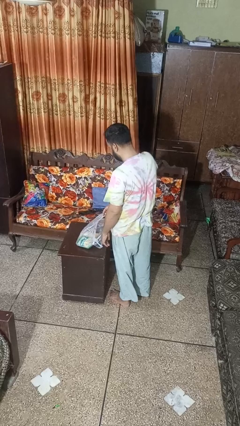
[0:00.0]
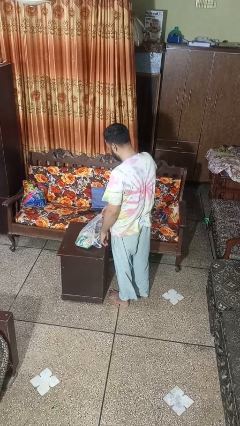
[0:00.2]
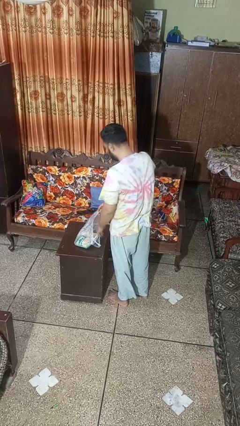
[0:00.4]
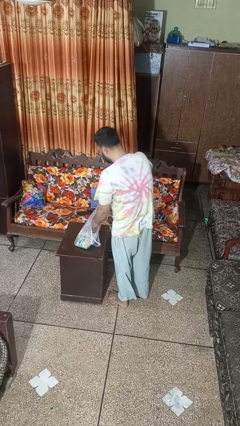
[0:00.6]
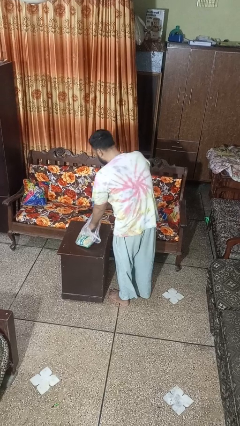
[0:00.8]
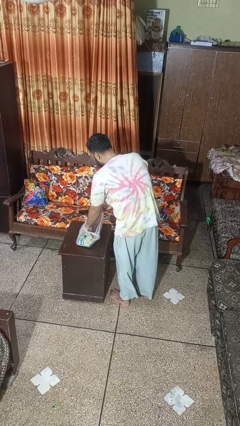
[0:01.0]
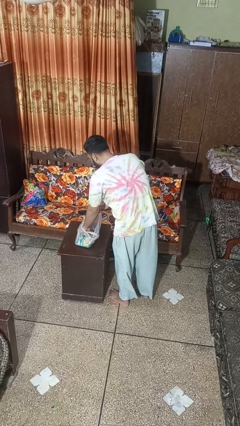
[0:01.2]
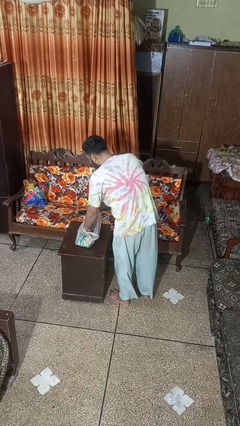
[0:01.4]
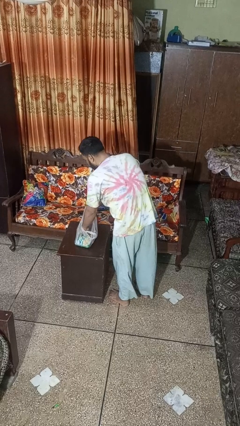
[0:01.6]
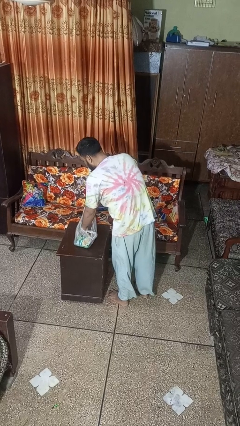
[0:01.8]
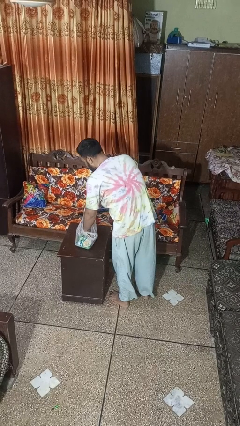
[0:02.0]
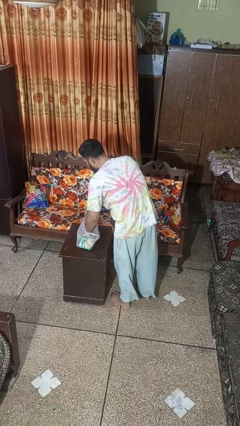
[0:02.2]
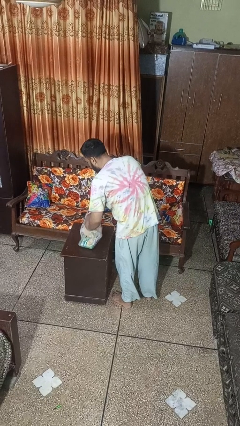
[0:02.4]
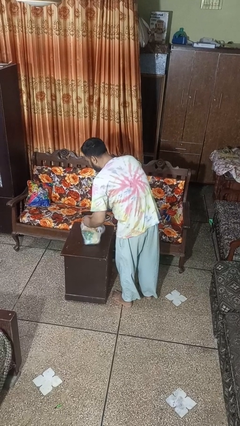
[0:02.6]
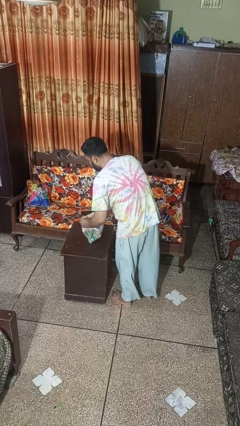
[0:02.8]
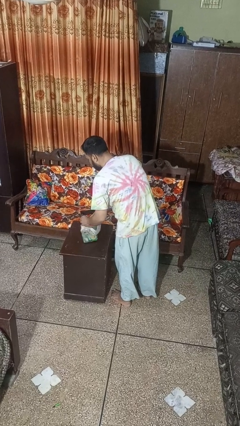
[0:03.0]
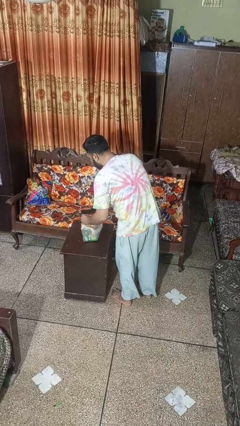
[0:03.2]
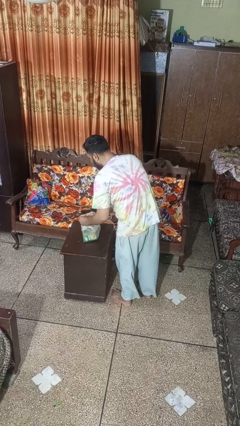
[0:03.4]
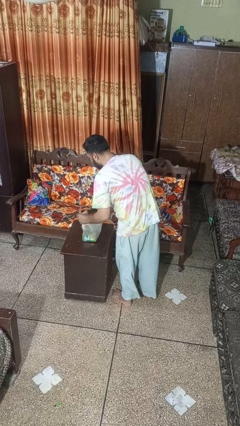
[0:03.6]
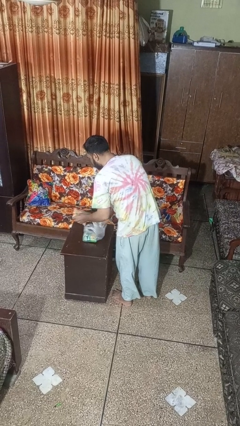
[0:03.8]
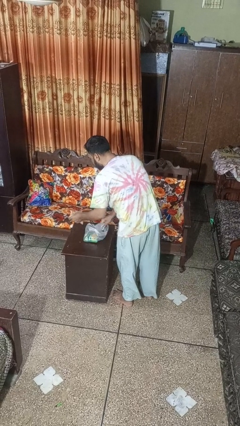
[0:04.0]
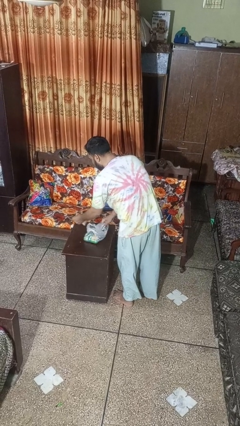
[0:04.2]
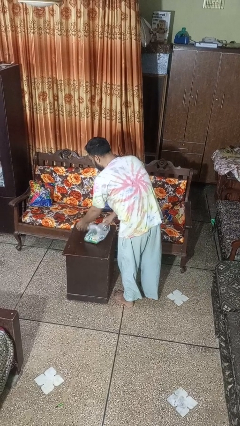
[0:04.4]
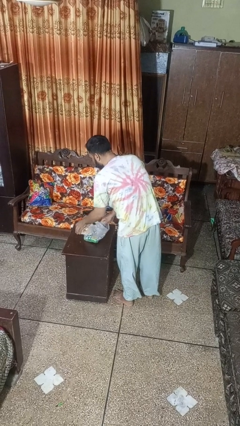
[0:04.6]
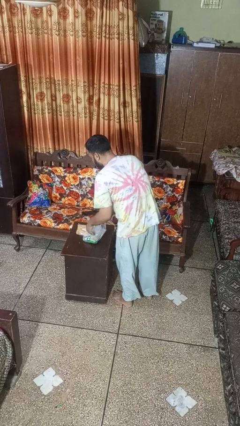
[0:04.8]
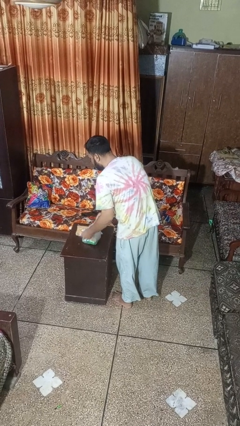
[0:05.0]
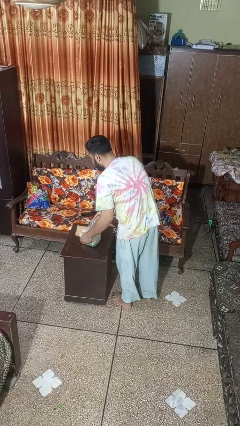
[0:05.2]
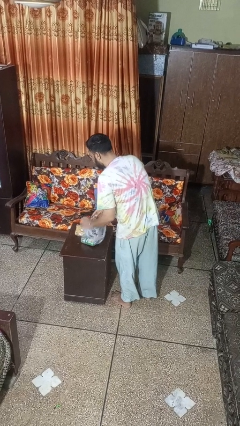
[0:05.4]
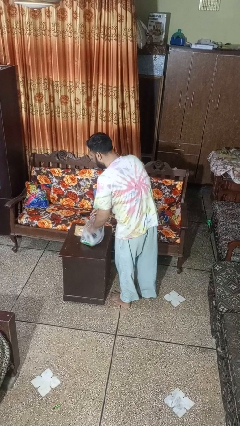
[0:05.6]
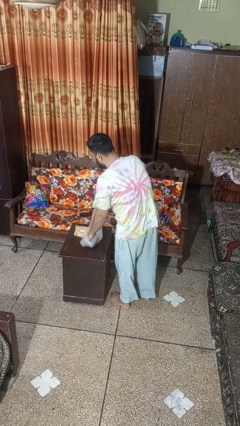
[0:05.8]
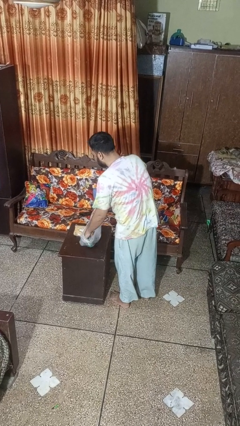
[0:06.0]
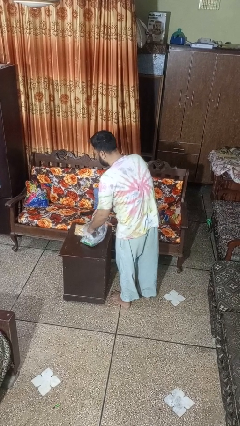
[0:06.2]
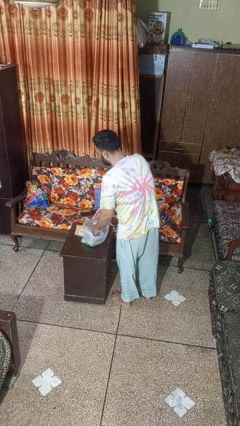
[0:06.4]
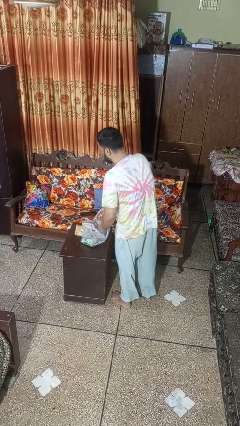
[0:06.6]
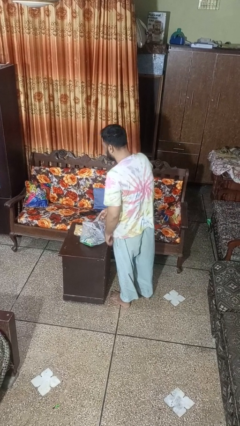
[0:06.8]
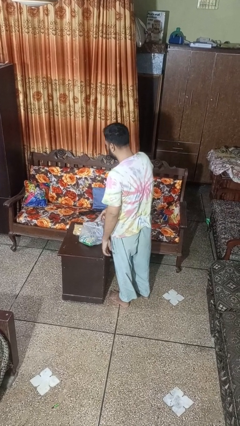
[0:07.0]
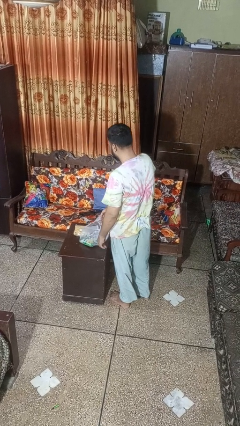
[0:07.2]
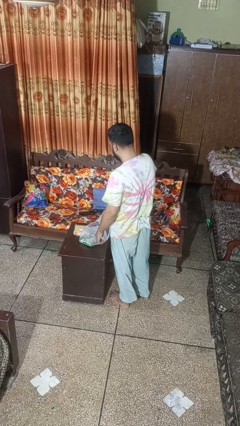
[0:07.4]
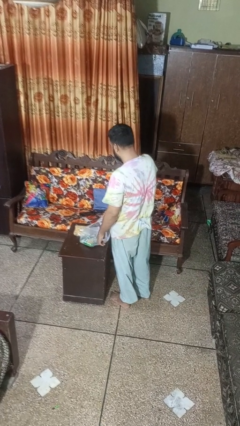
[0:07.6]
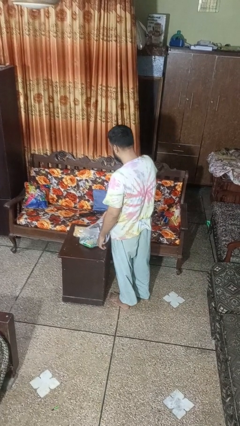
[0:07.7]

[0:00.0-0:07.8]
person takes object from bag

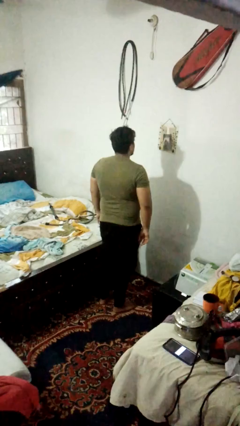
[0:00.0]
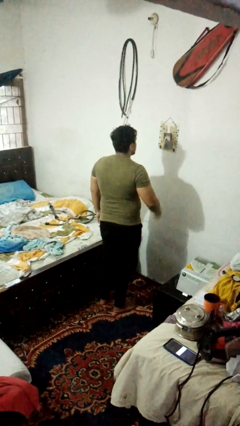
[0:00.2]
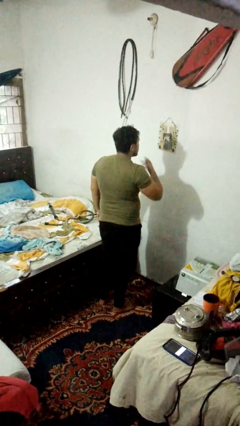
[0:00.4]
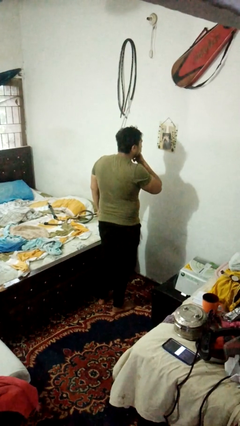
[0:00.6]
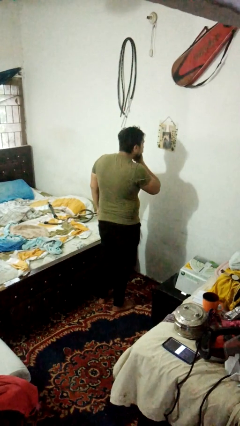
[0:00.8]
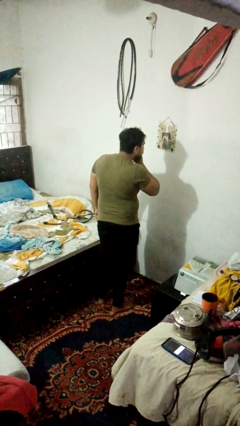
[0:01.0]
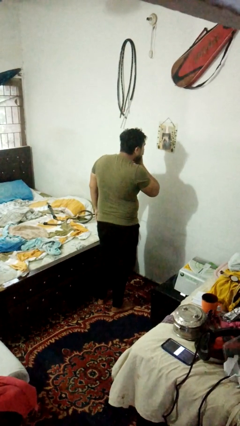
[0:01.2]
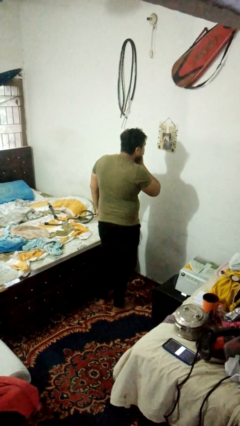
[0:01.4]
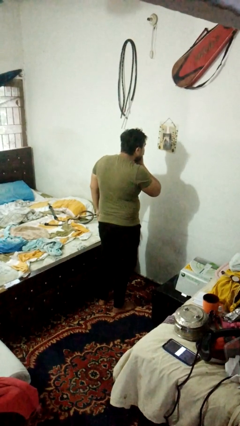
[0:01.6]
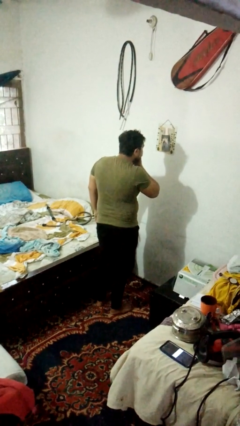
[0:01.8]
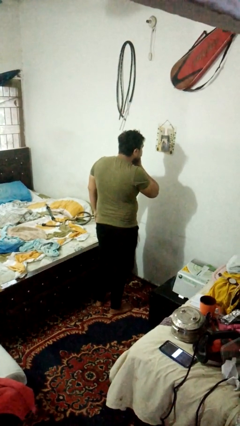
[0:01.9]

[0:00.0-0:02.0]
person strokes chin

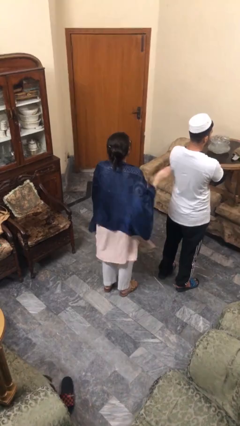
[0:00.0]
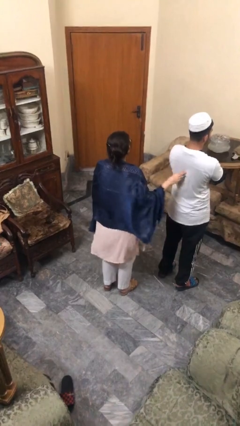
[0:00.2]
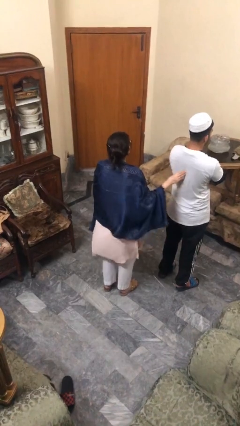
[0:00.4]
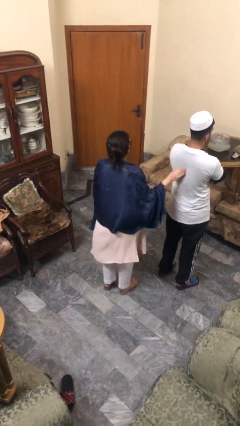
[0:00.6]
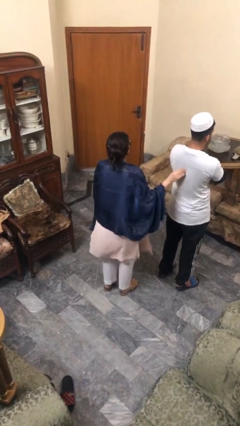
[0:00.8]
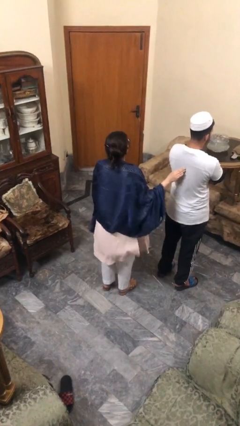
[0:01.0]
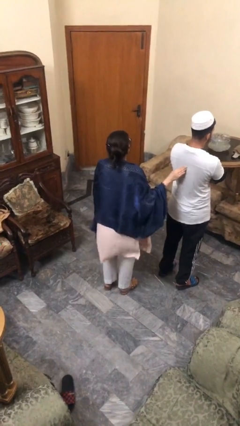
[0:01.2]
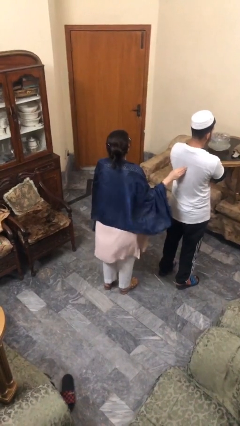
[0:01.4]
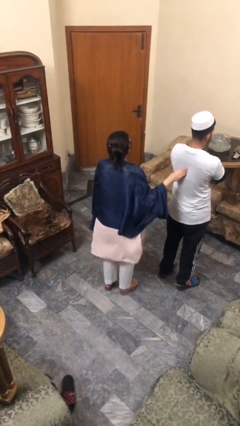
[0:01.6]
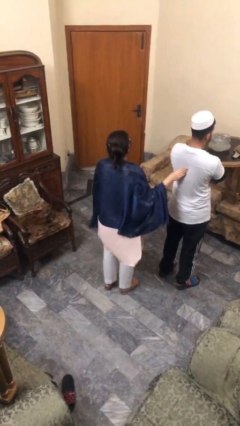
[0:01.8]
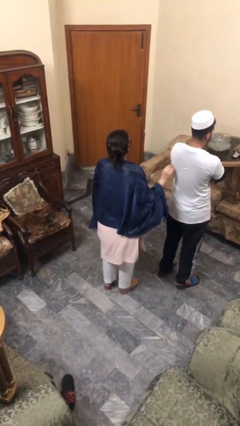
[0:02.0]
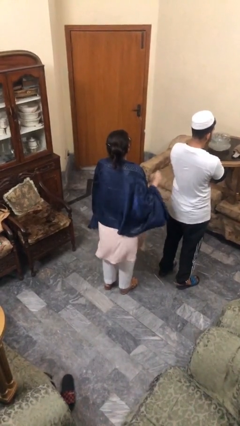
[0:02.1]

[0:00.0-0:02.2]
person touches back of person

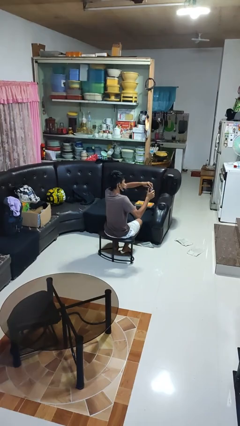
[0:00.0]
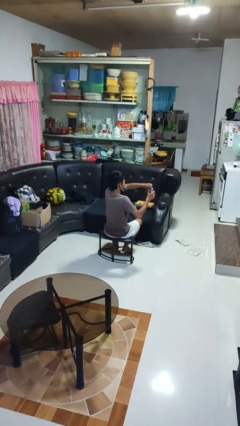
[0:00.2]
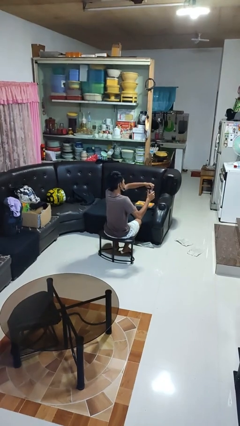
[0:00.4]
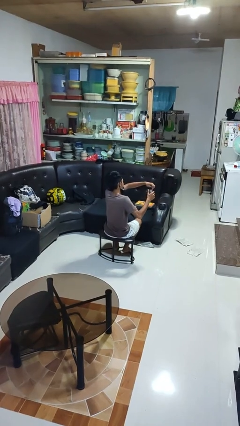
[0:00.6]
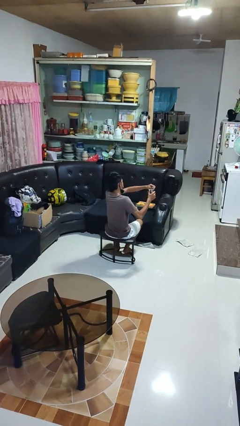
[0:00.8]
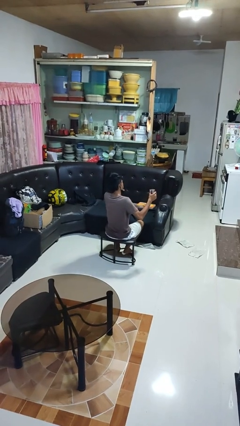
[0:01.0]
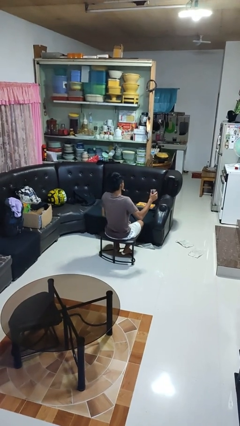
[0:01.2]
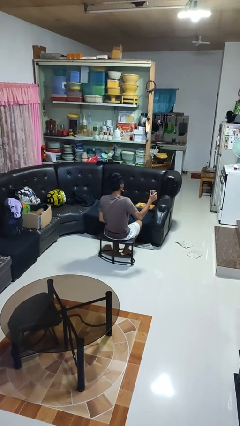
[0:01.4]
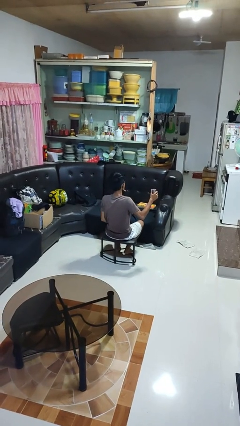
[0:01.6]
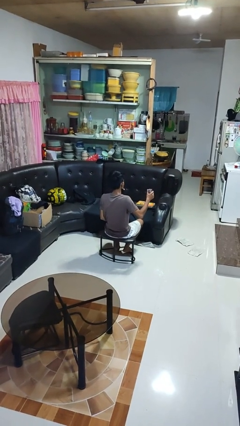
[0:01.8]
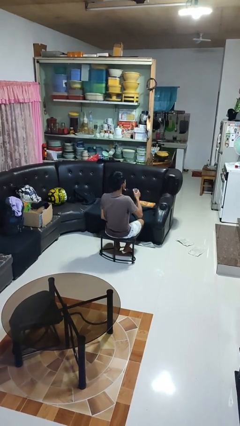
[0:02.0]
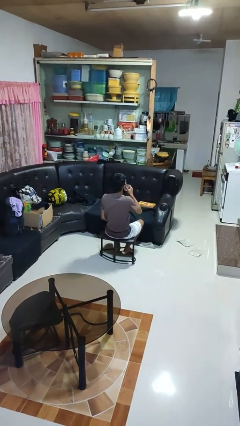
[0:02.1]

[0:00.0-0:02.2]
person opens beverage can

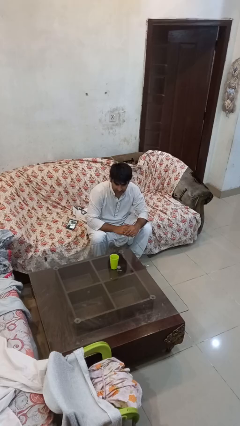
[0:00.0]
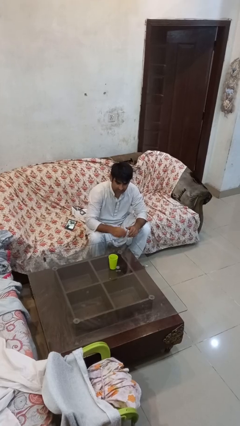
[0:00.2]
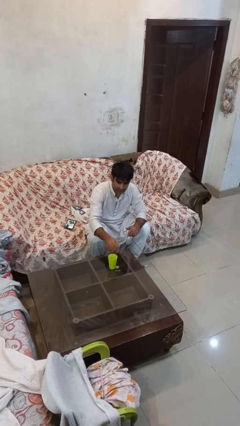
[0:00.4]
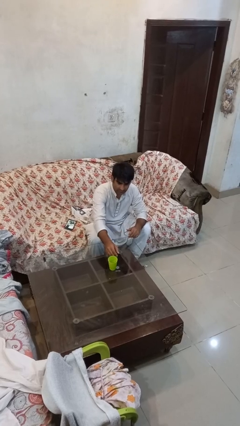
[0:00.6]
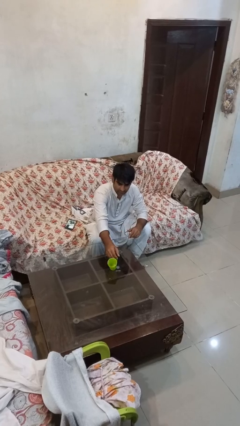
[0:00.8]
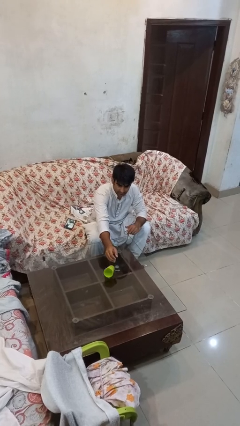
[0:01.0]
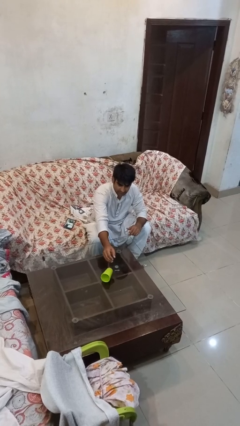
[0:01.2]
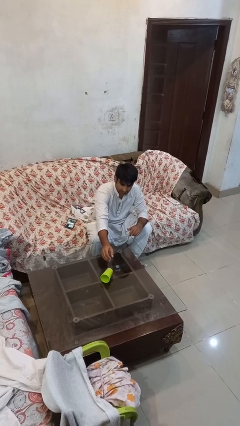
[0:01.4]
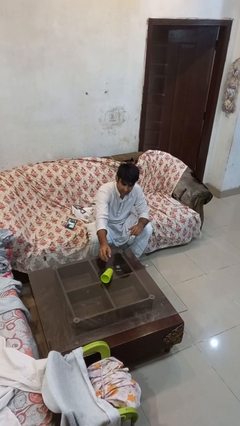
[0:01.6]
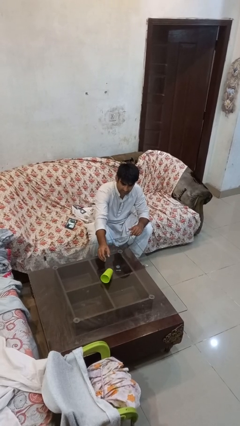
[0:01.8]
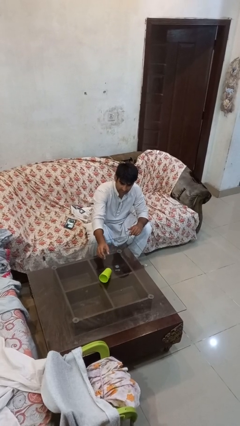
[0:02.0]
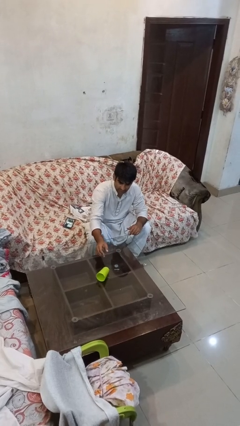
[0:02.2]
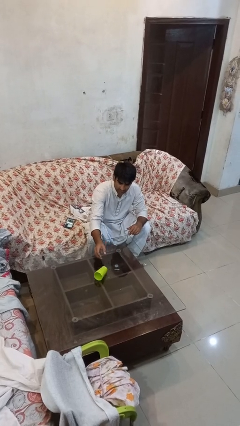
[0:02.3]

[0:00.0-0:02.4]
person knocks over glass

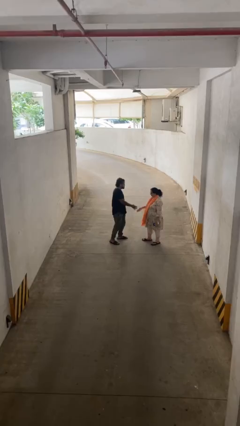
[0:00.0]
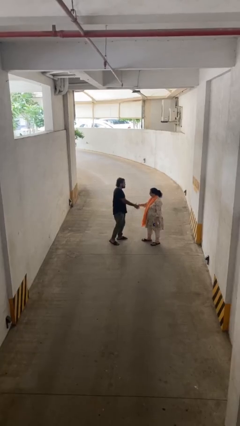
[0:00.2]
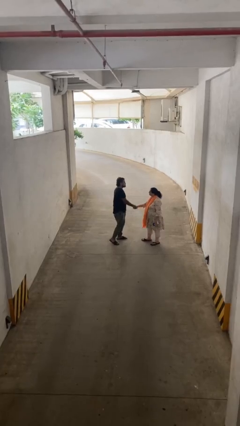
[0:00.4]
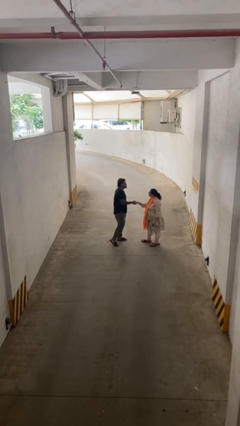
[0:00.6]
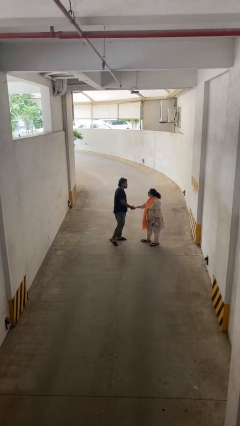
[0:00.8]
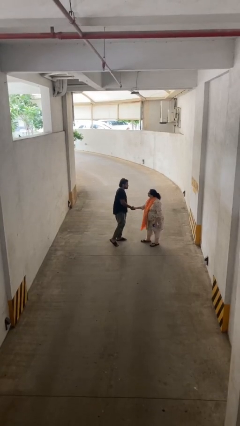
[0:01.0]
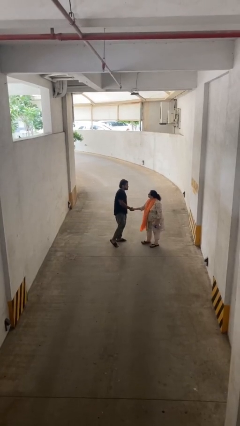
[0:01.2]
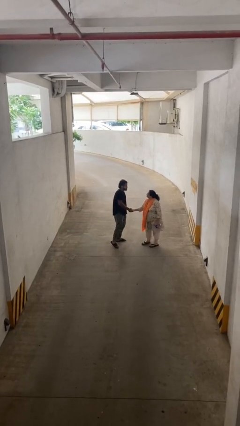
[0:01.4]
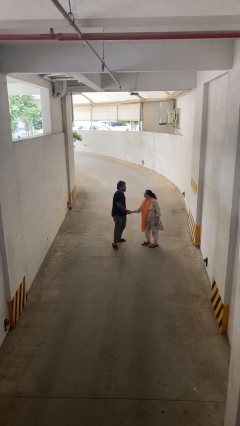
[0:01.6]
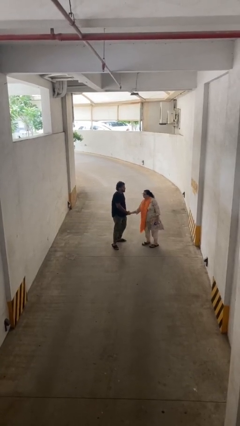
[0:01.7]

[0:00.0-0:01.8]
person shakes hand
